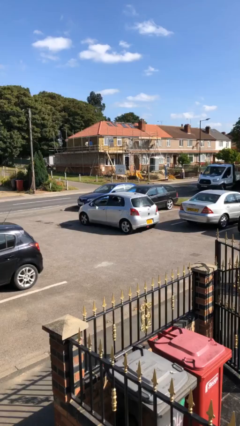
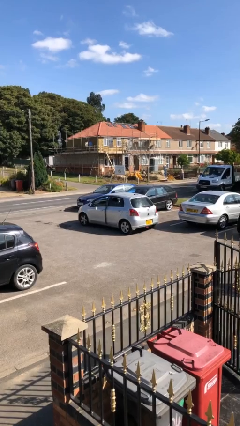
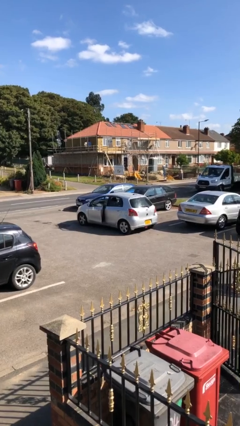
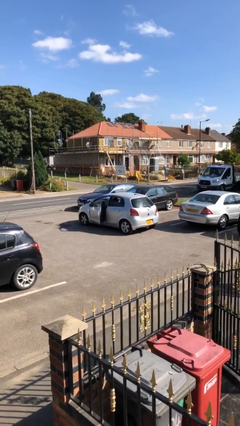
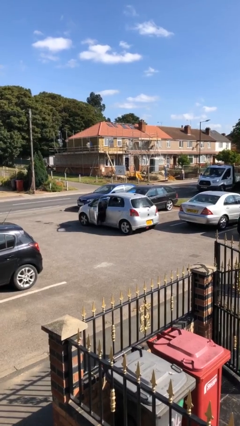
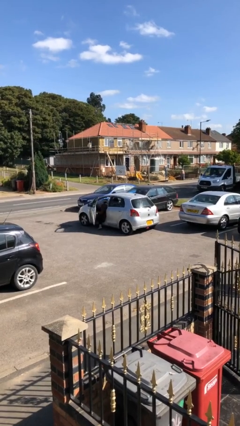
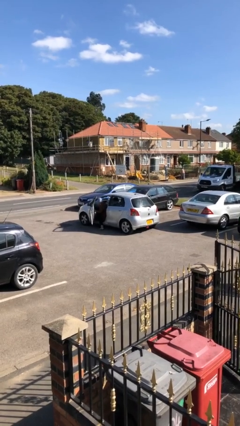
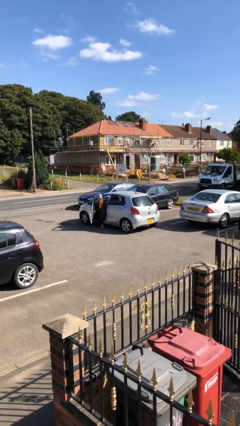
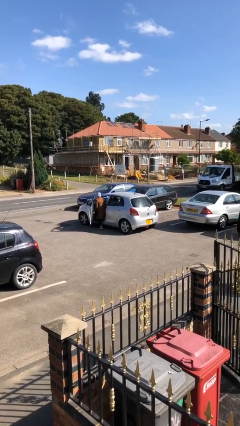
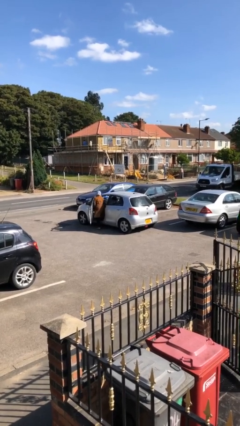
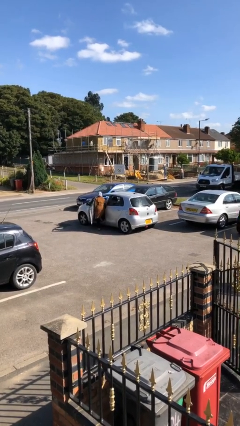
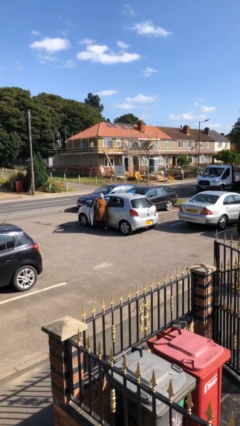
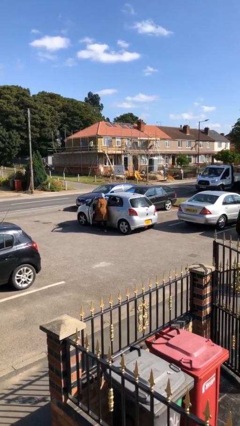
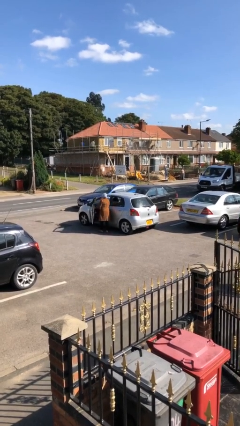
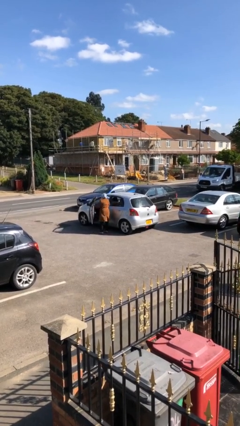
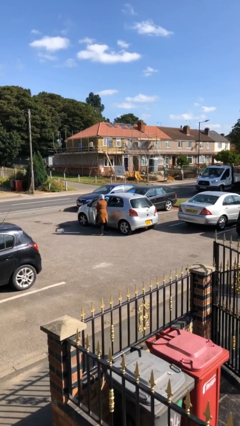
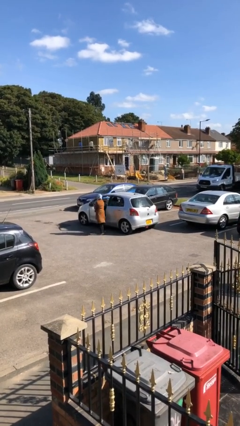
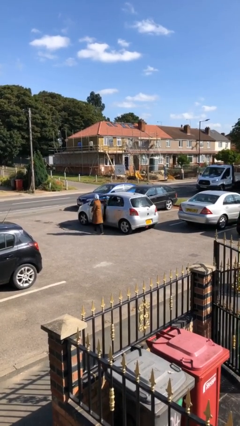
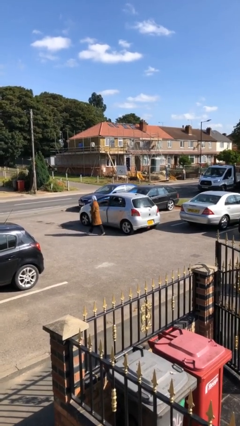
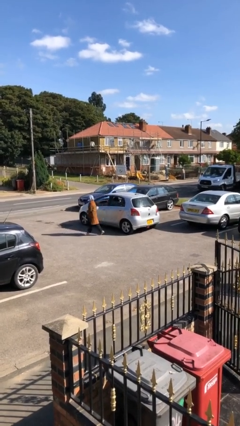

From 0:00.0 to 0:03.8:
car drops off person

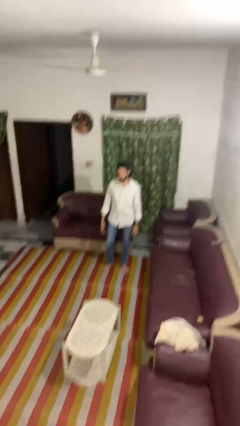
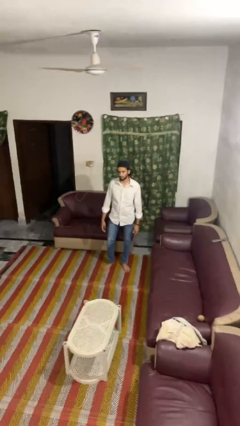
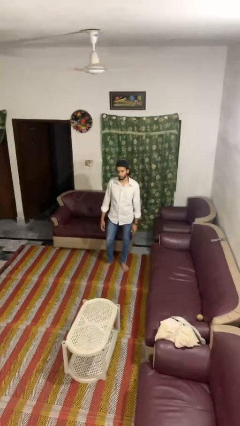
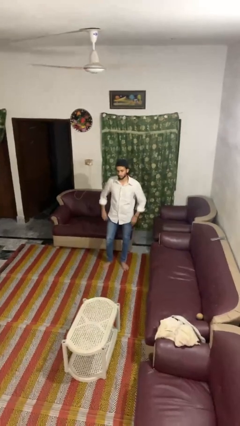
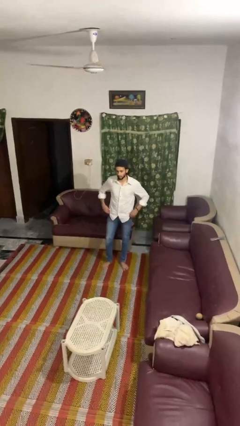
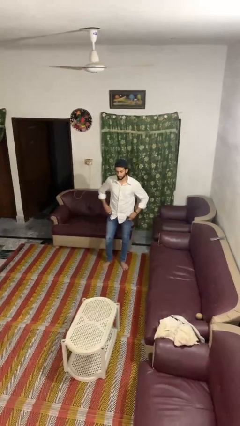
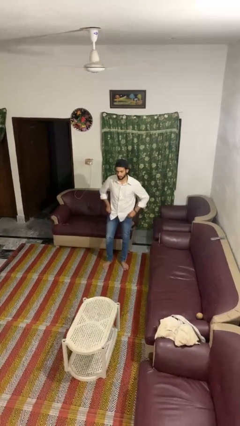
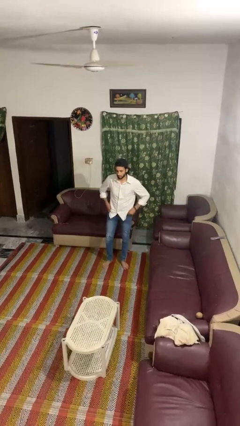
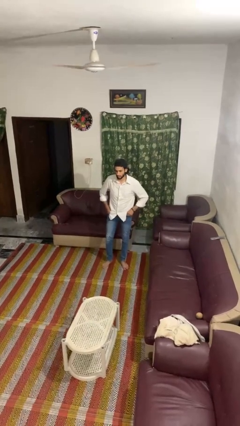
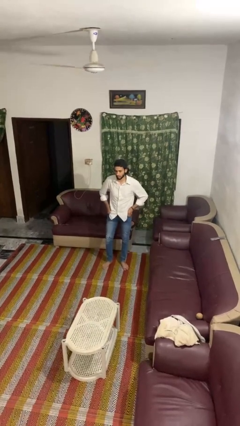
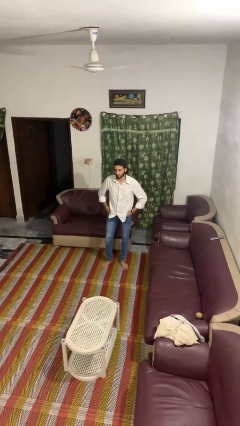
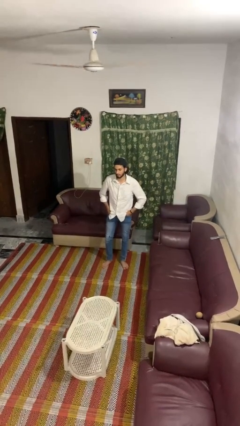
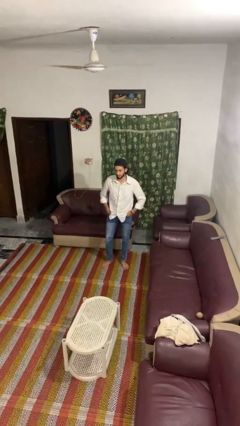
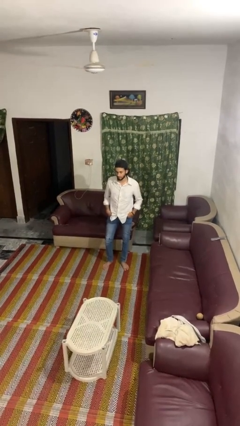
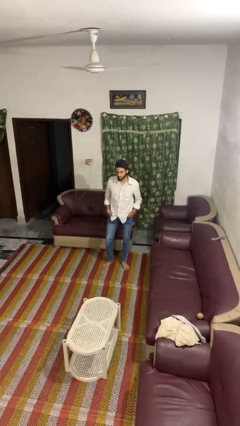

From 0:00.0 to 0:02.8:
person puts hands in back pockets

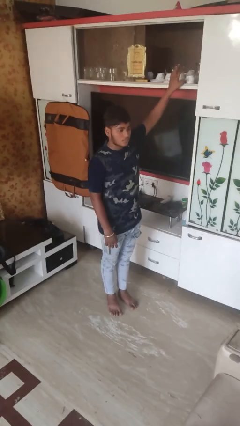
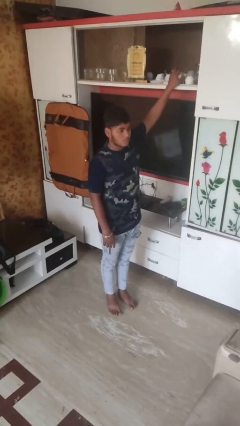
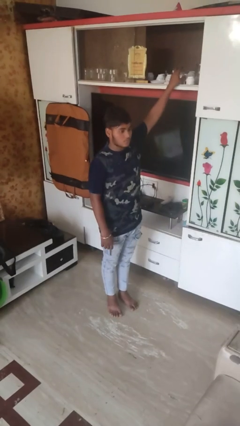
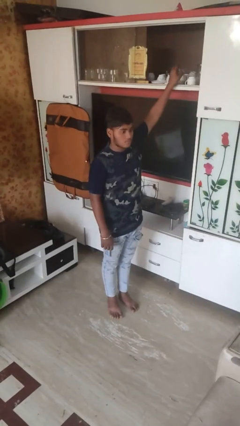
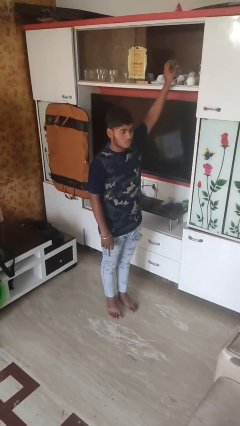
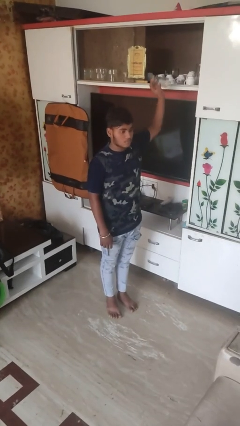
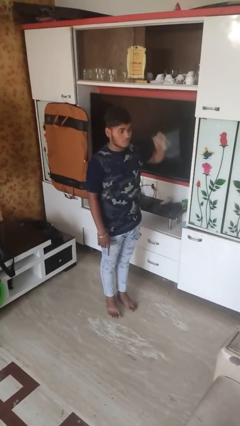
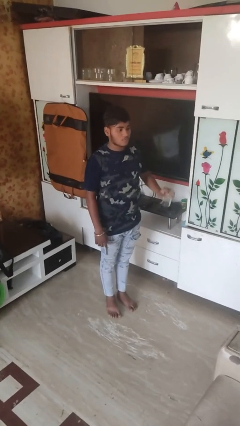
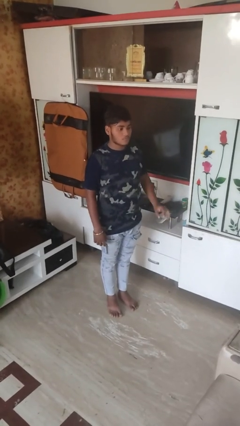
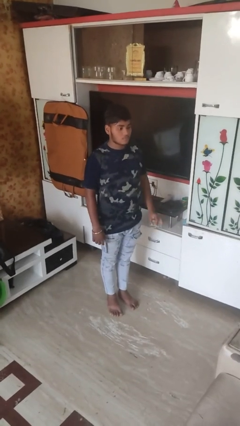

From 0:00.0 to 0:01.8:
person takes object from cabinet

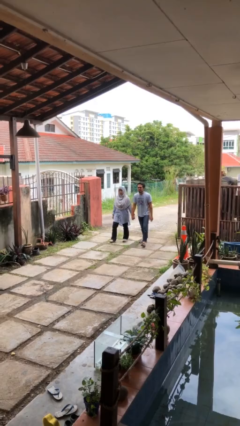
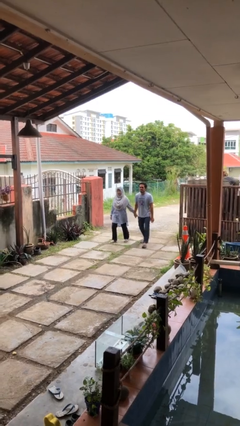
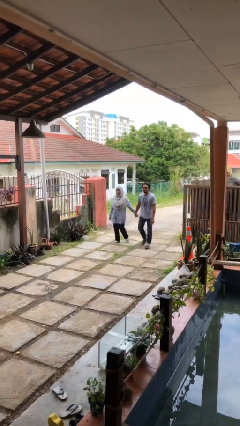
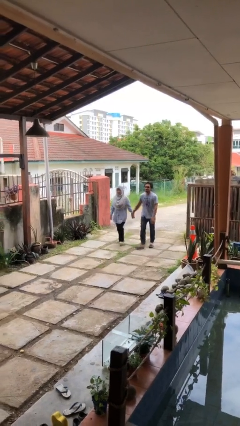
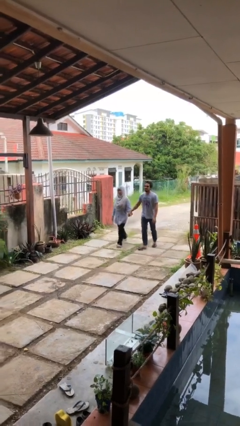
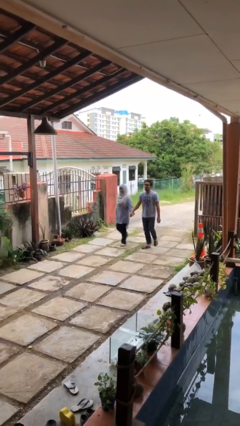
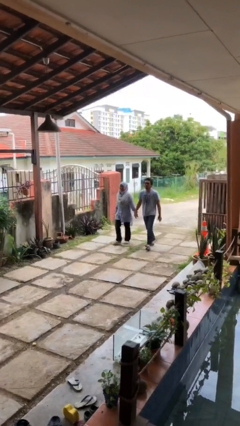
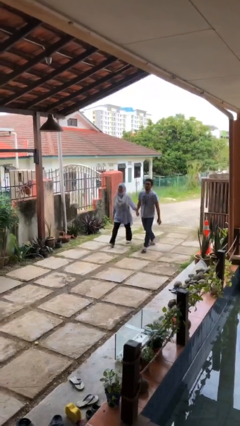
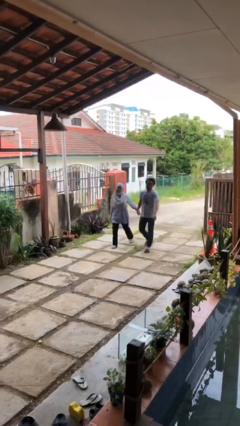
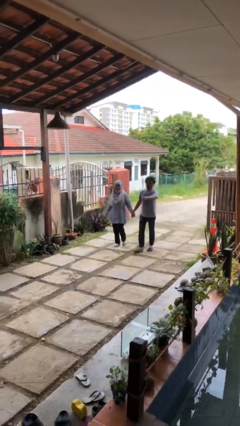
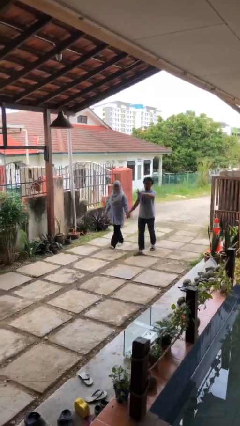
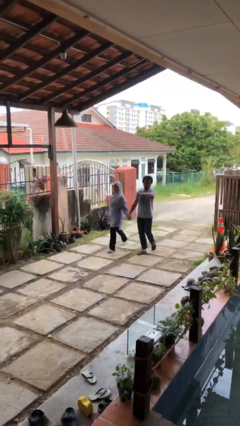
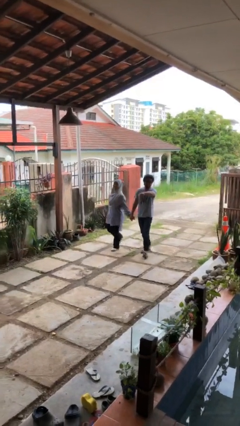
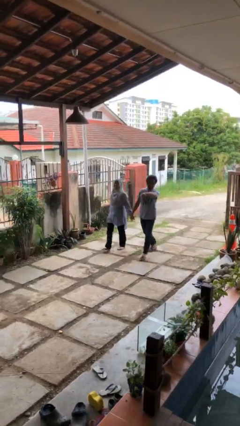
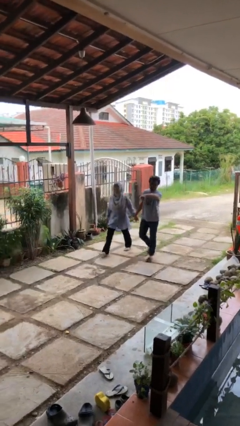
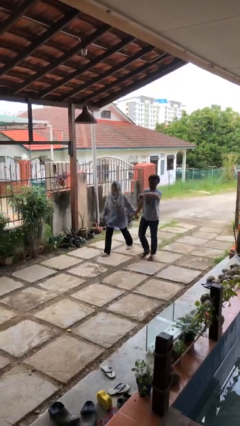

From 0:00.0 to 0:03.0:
person holds hand

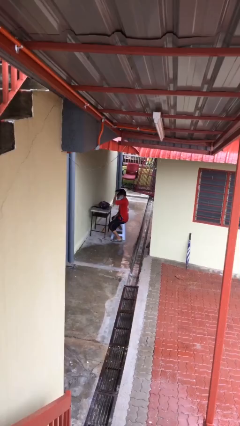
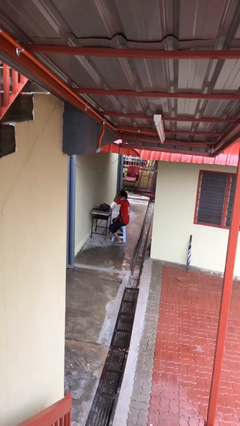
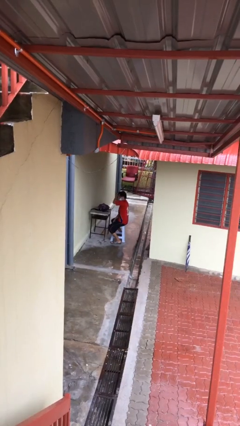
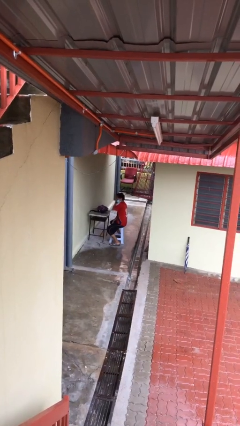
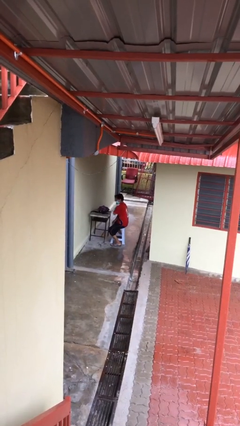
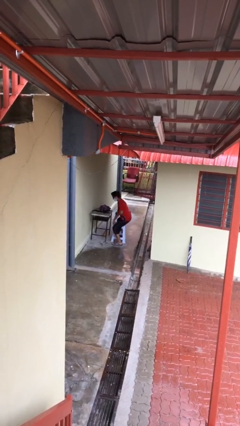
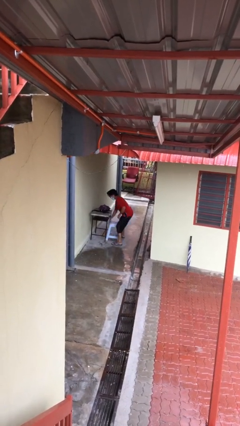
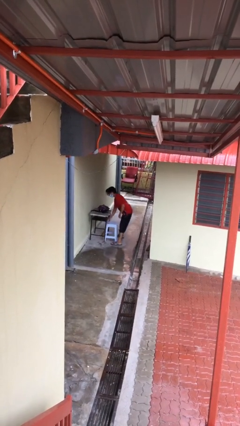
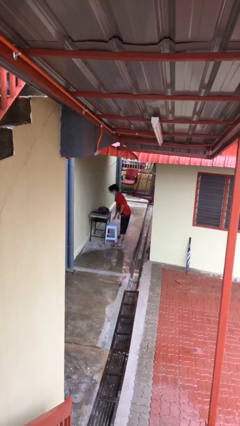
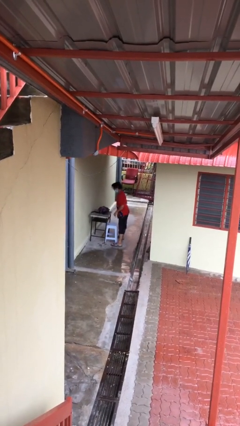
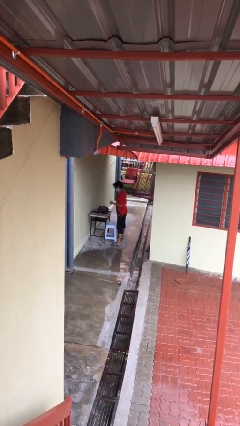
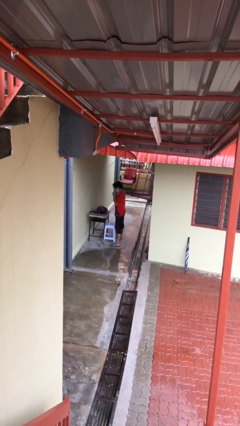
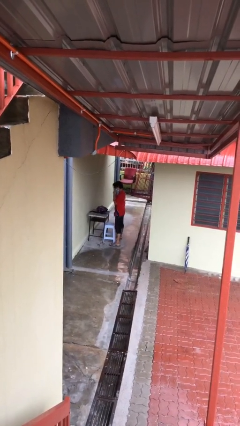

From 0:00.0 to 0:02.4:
person stands up

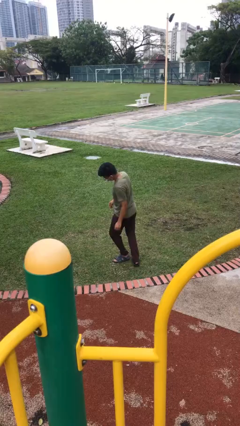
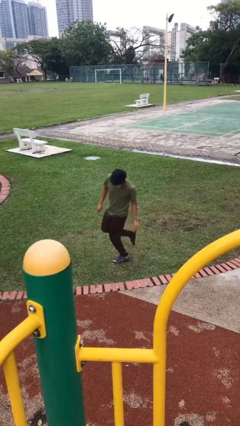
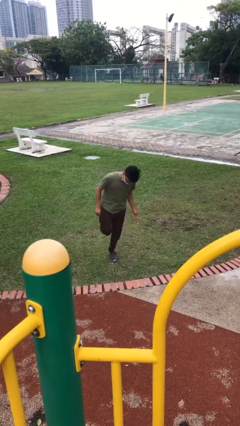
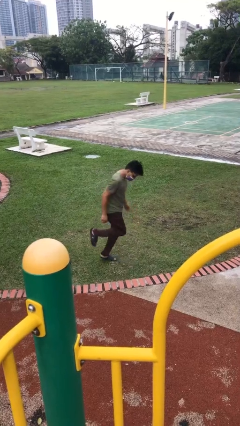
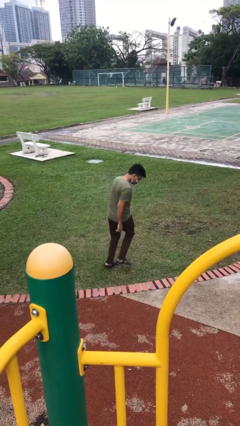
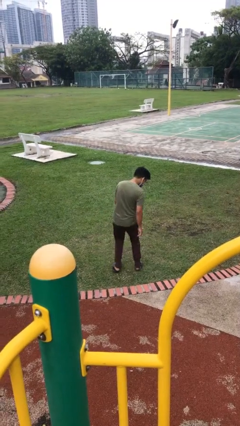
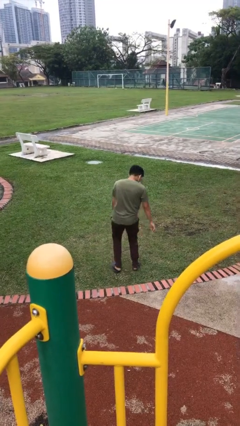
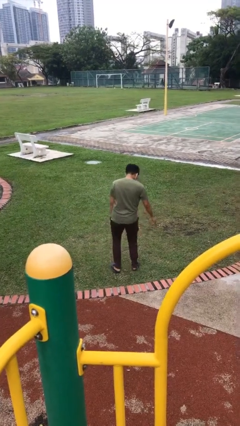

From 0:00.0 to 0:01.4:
person twirls

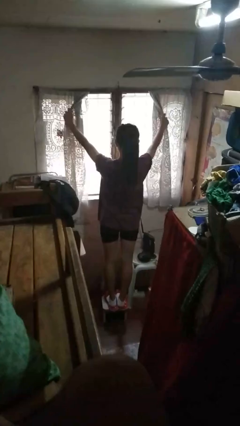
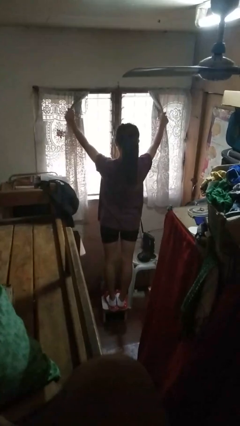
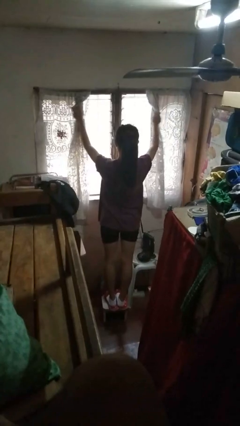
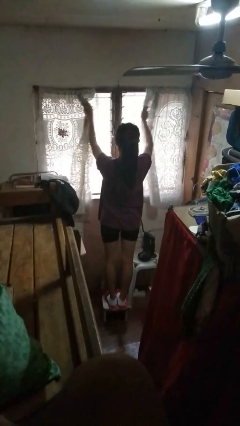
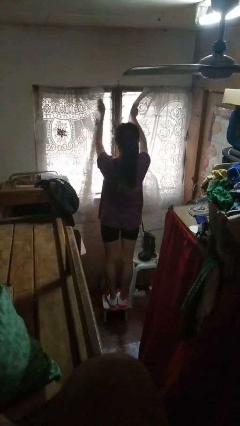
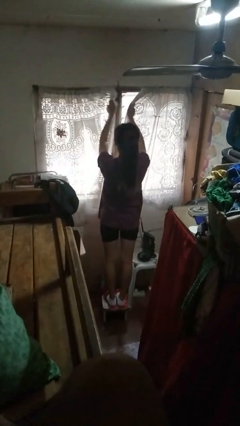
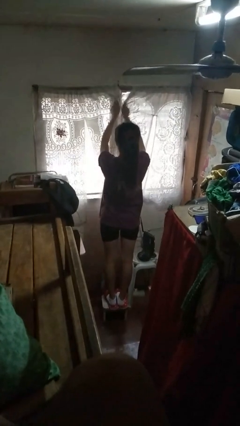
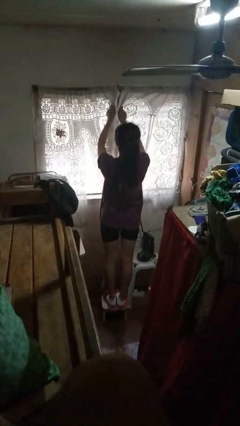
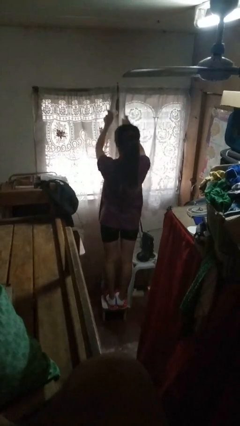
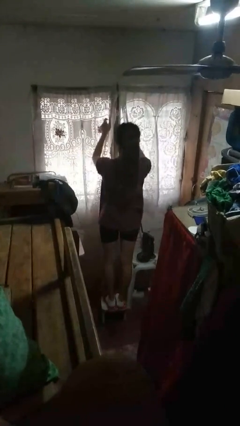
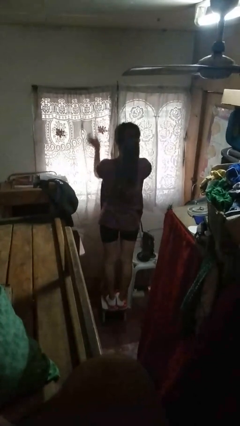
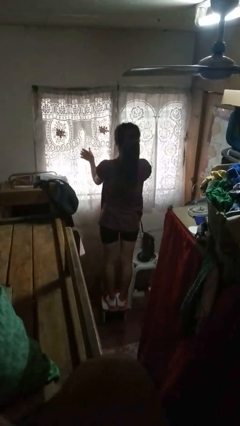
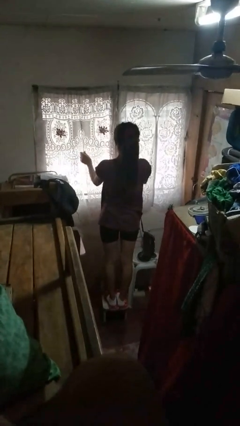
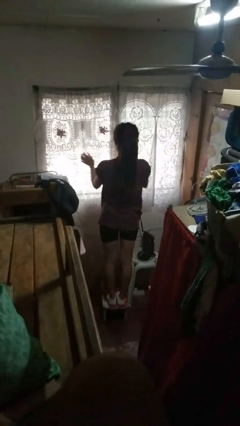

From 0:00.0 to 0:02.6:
person closes curtains
